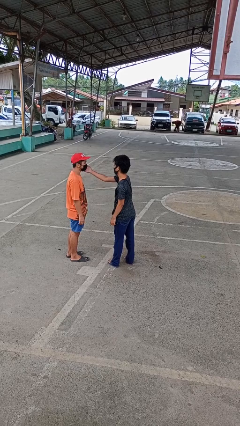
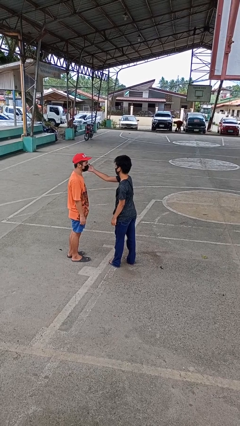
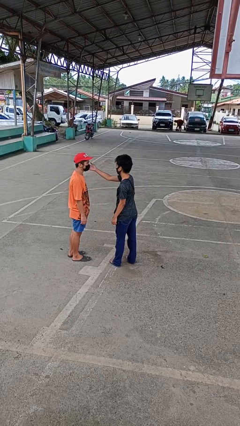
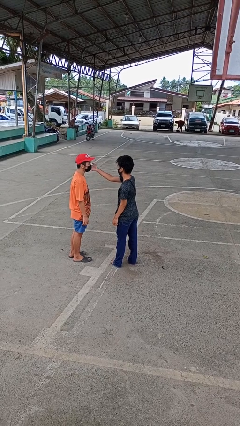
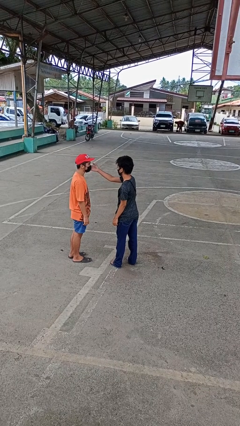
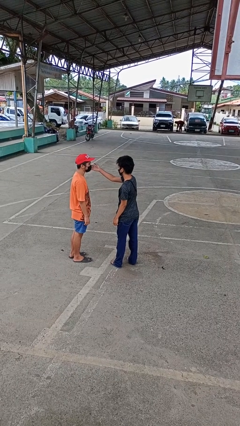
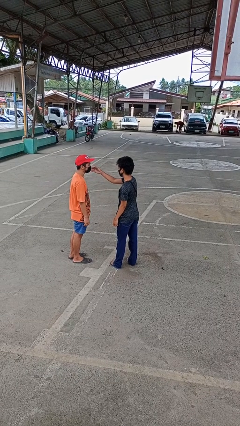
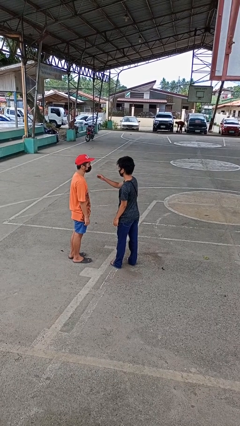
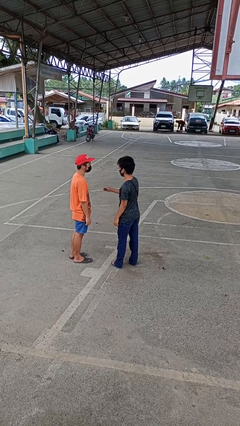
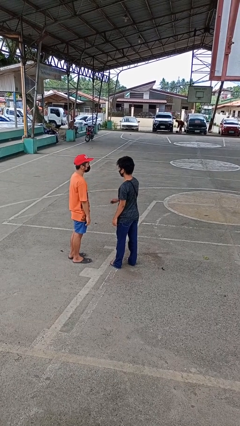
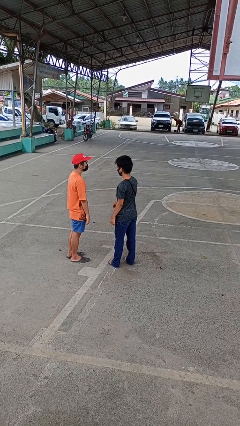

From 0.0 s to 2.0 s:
person touches face of person

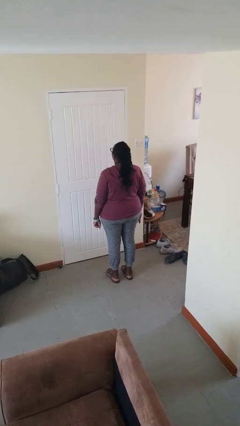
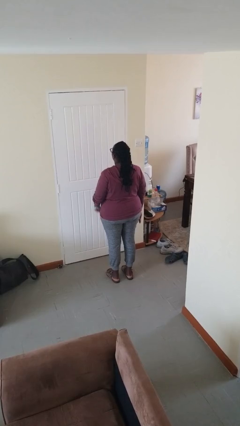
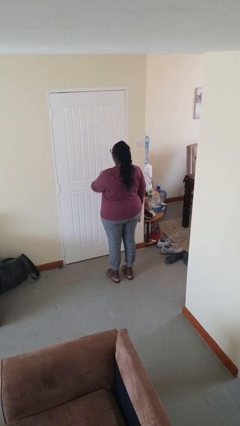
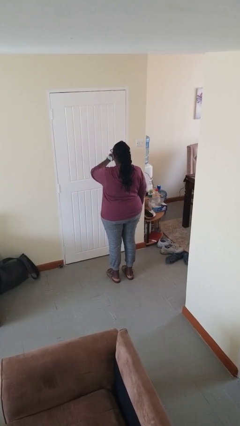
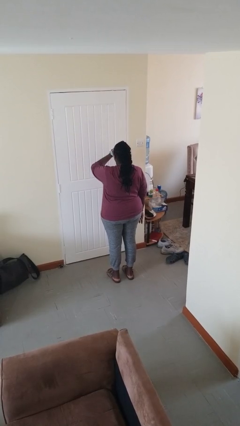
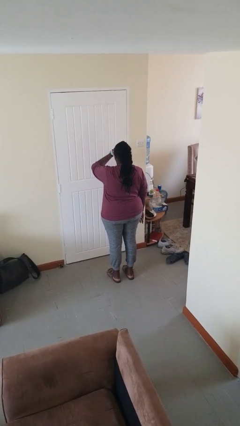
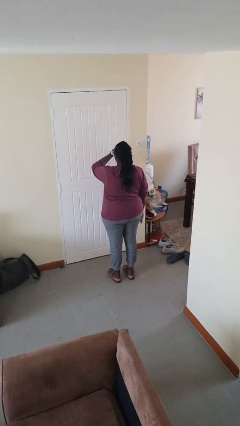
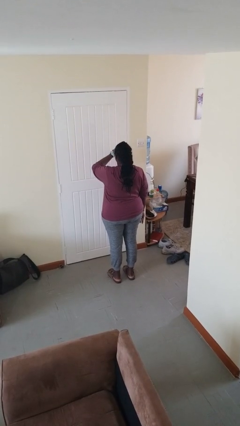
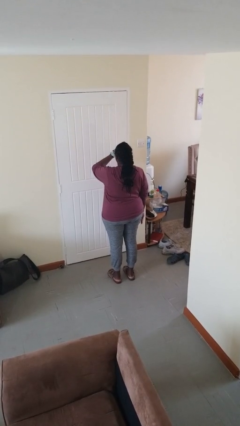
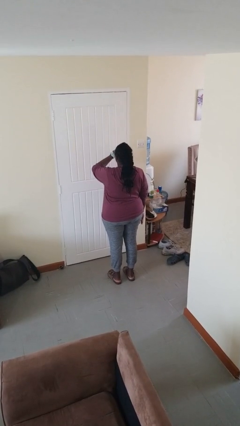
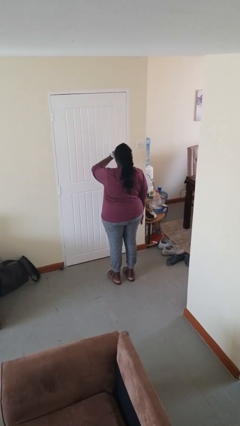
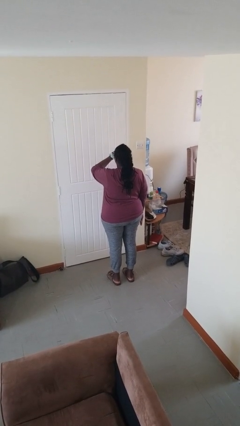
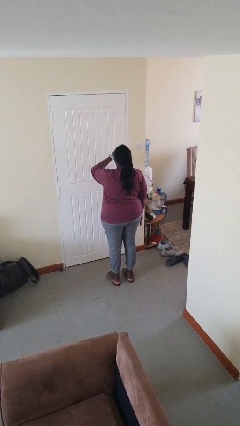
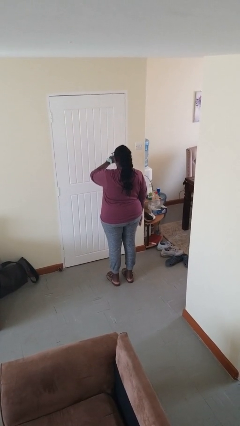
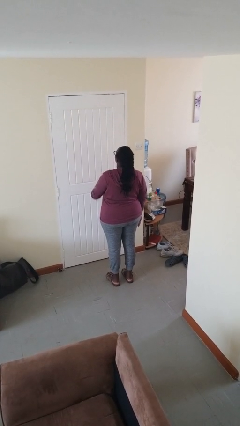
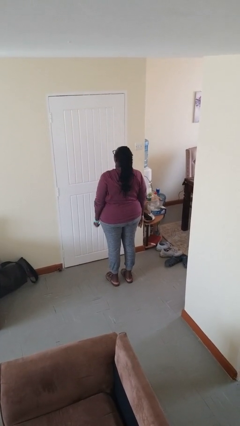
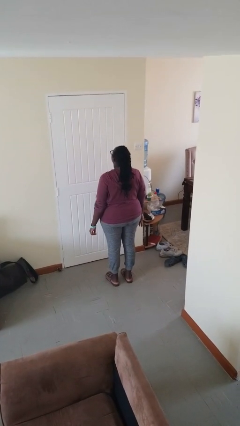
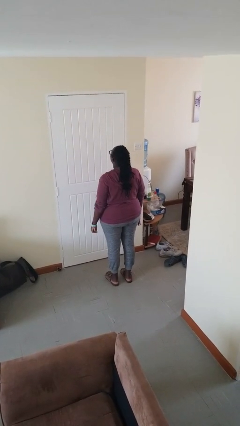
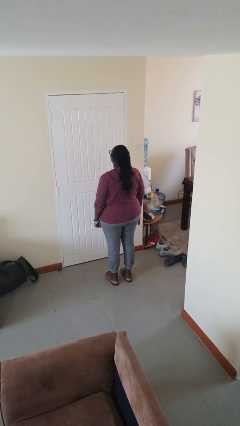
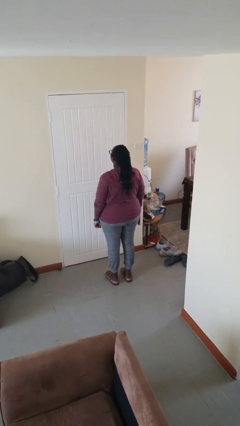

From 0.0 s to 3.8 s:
person looks at wristwatch

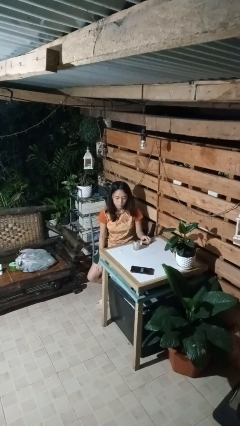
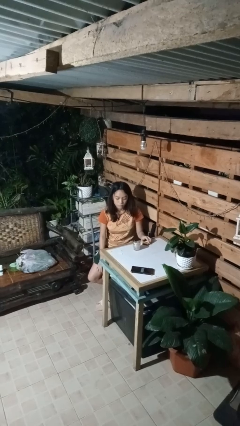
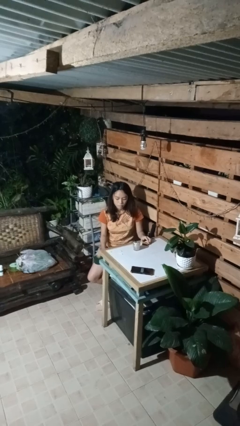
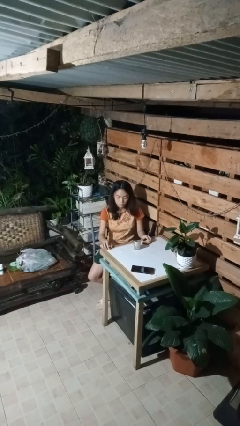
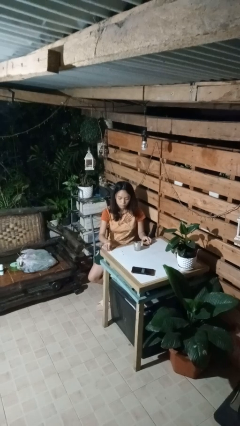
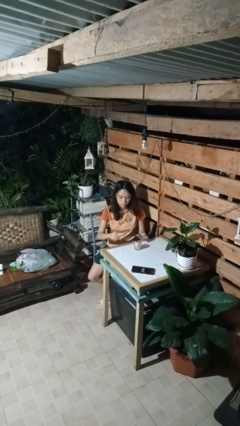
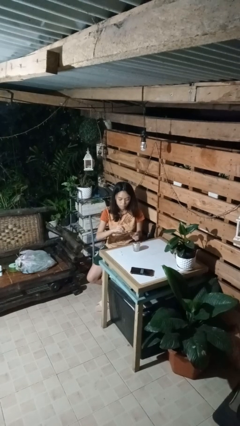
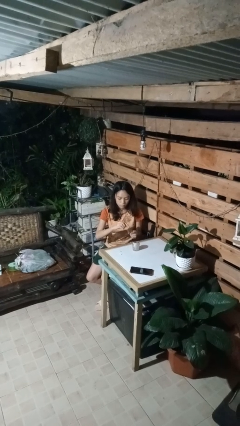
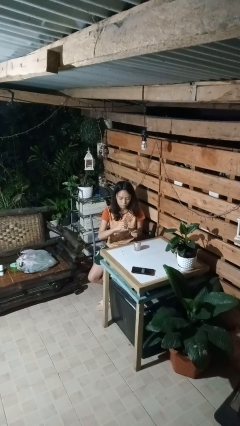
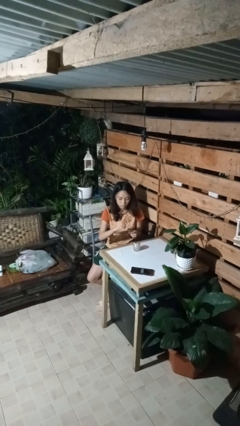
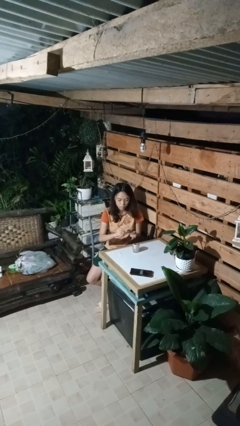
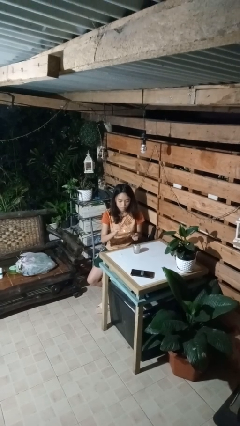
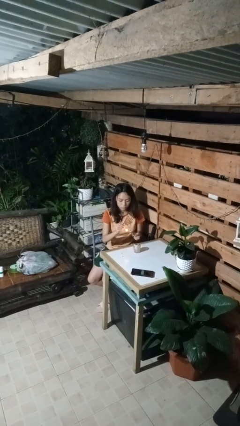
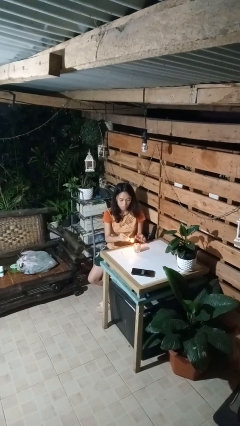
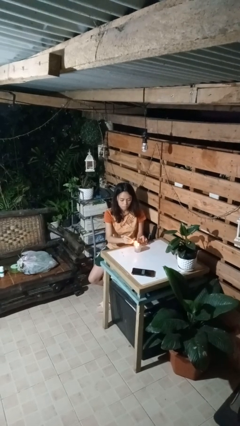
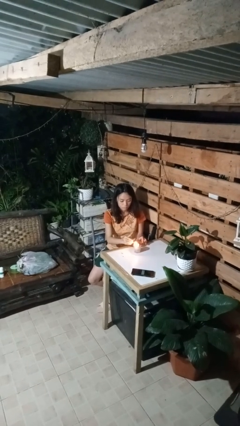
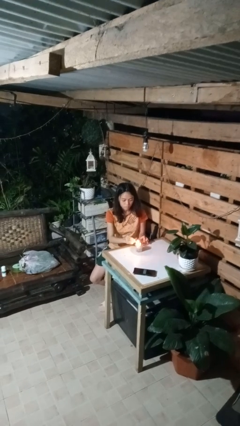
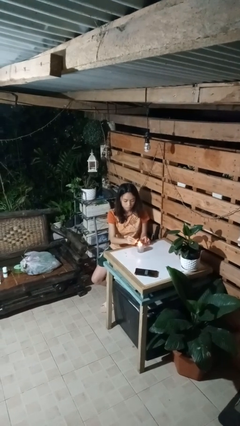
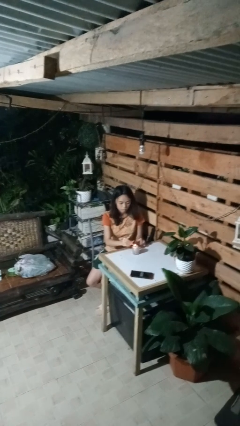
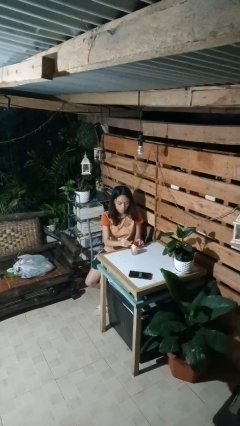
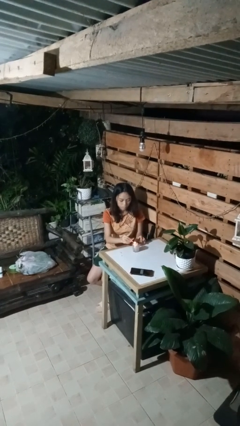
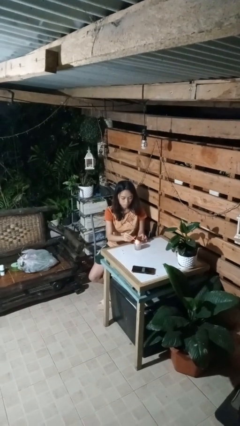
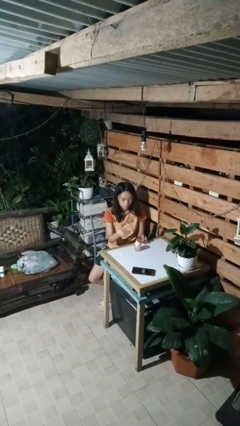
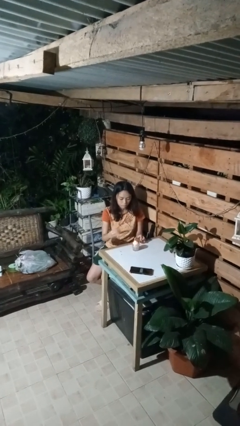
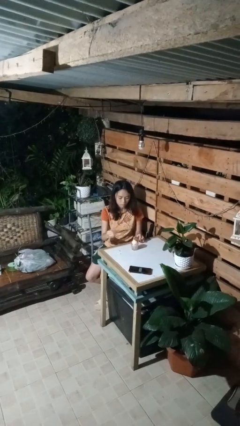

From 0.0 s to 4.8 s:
person lights candle

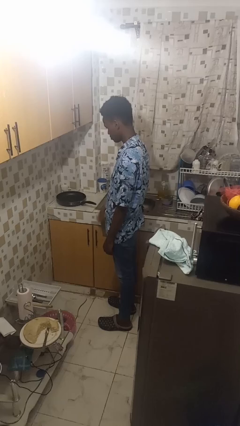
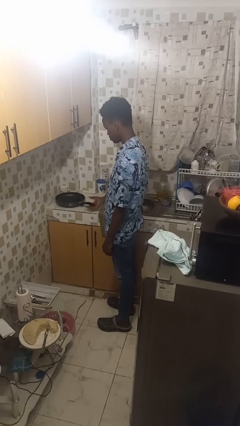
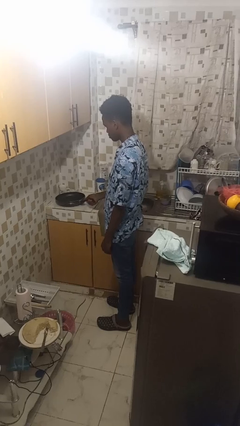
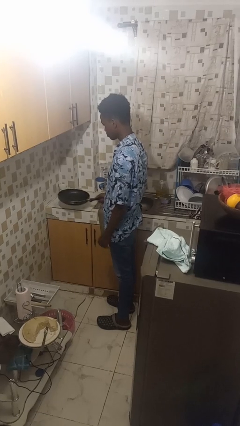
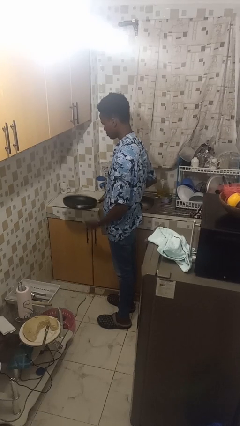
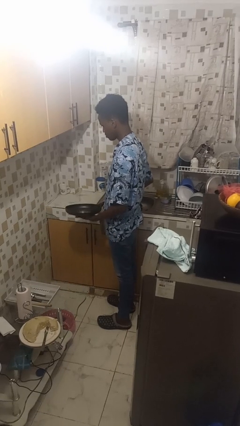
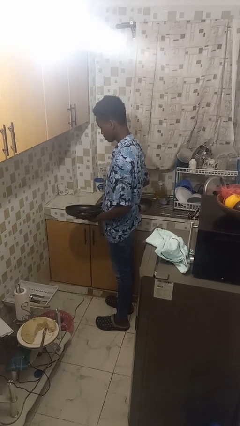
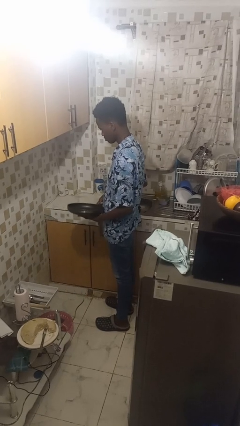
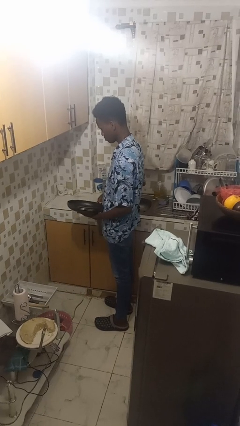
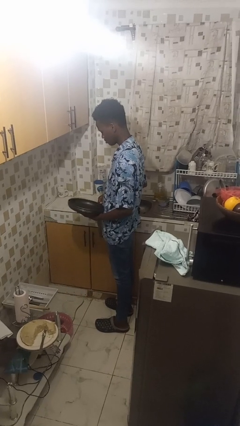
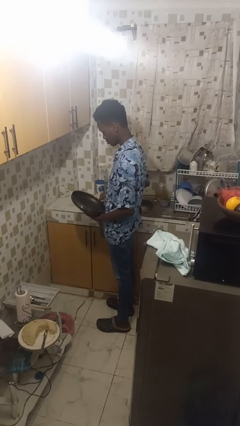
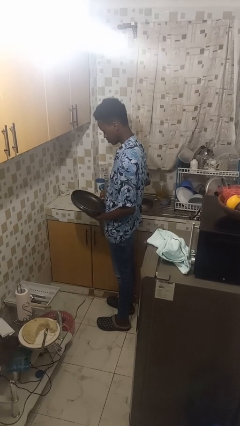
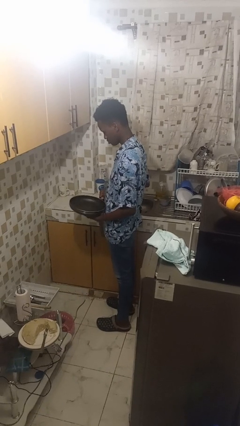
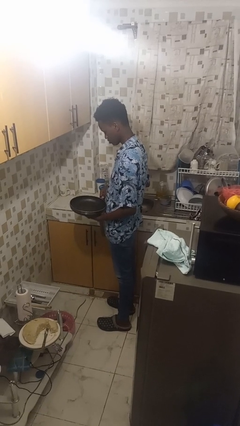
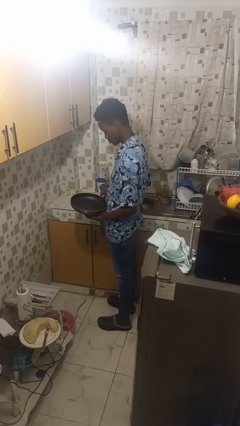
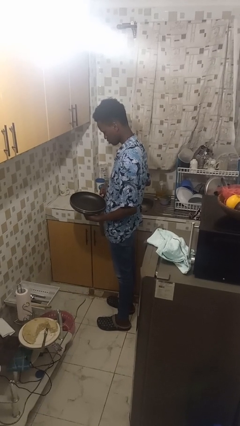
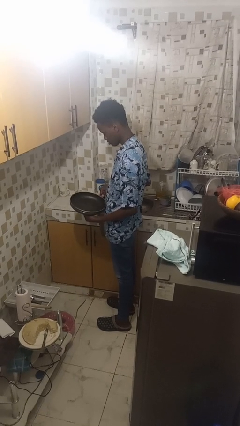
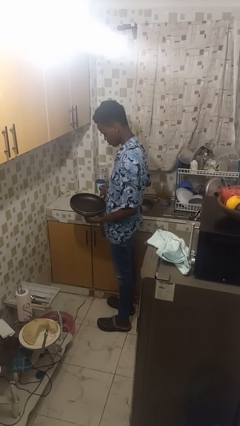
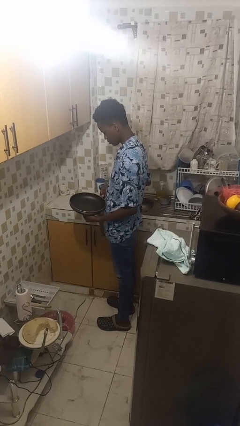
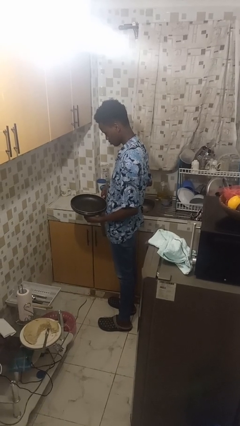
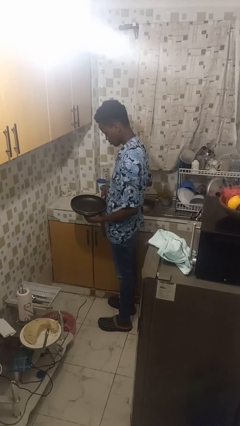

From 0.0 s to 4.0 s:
person picks up object from countertop

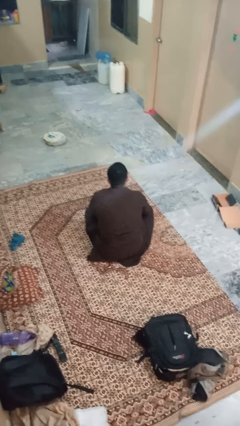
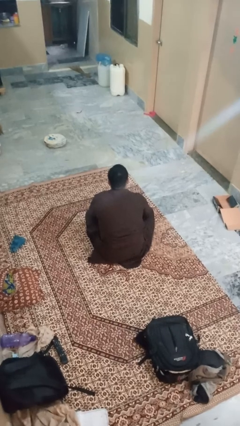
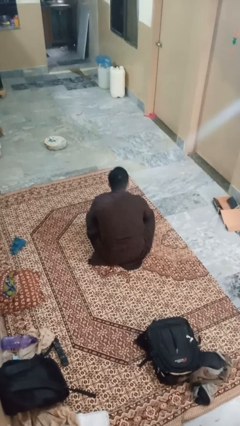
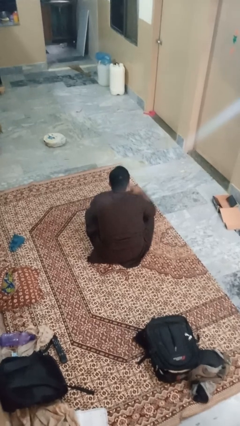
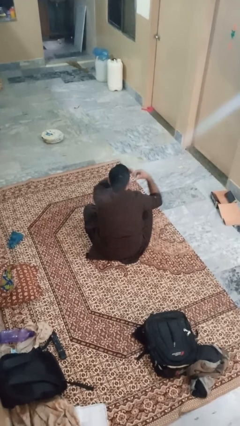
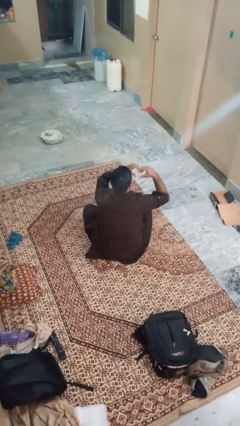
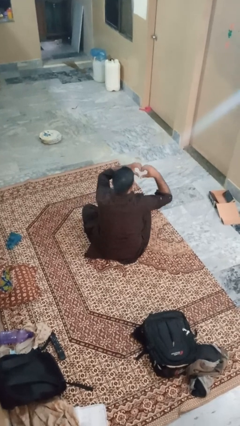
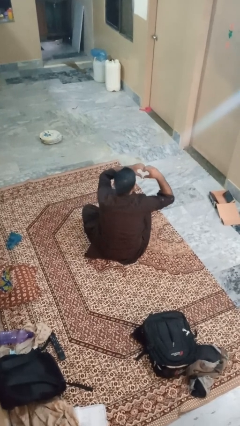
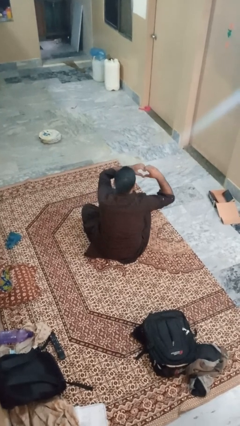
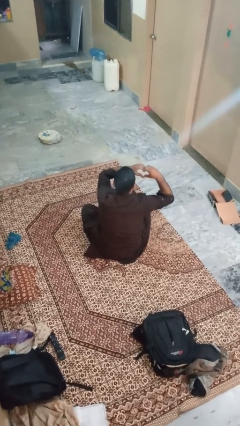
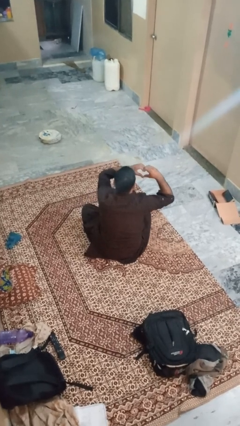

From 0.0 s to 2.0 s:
person gestures heart

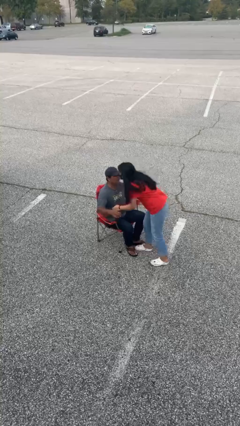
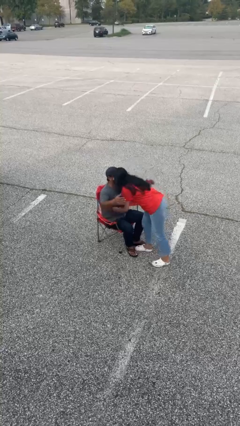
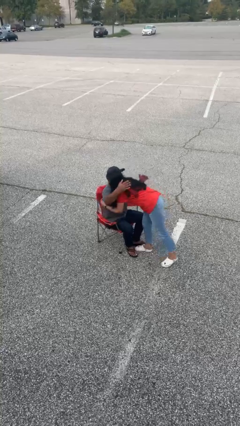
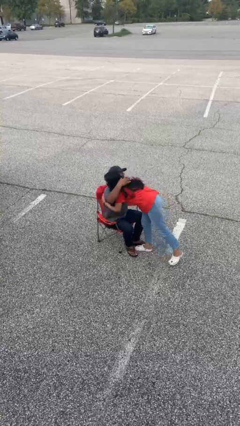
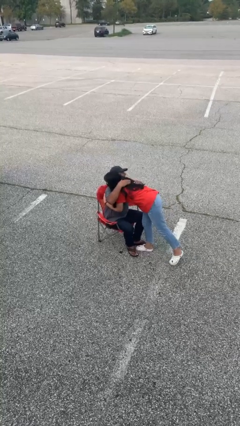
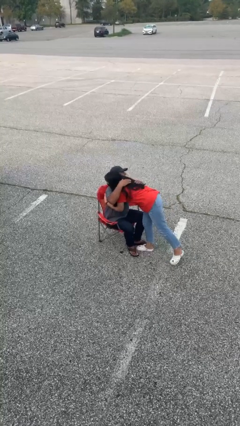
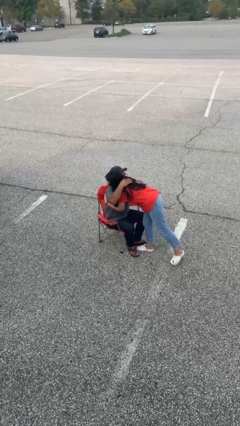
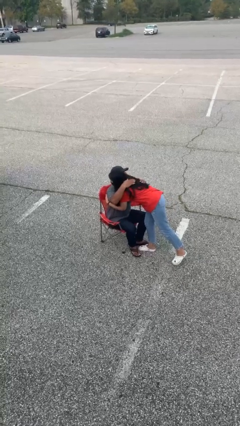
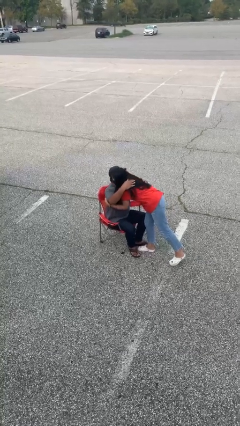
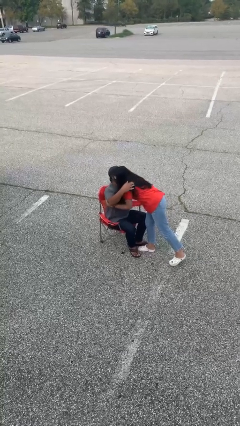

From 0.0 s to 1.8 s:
person embraces person
